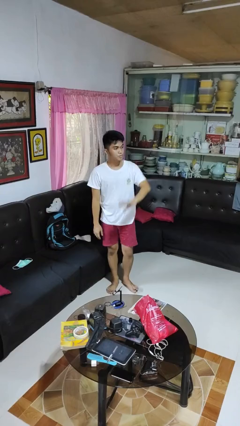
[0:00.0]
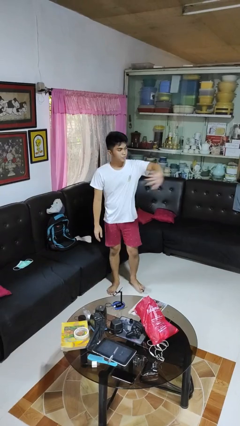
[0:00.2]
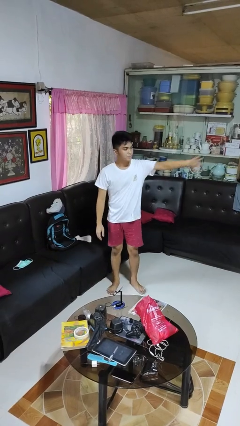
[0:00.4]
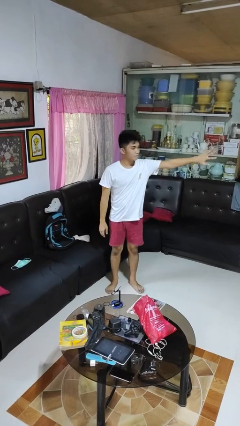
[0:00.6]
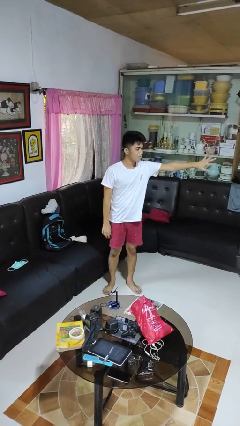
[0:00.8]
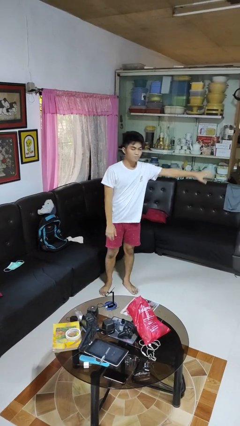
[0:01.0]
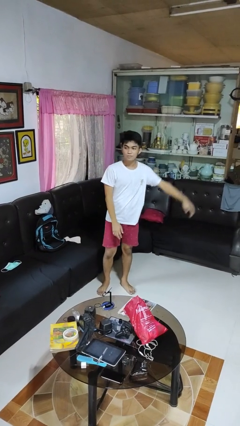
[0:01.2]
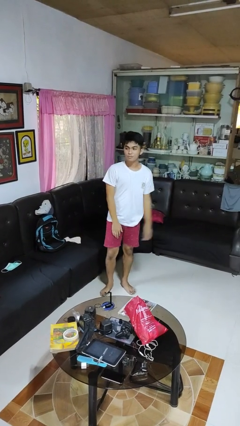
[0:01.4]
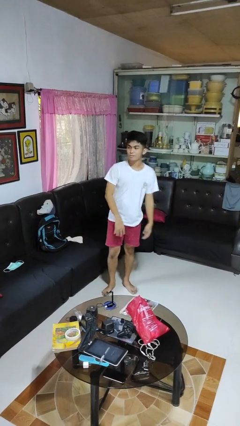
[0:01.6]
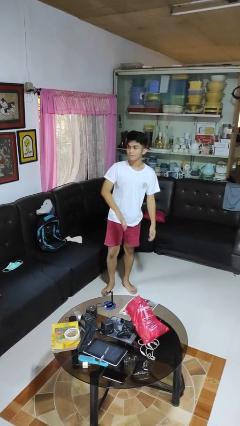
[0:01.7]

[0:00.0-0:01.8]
person gestures swipe left

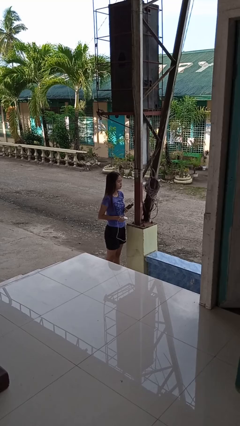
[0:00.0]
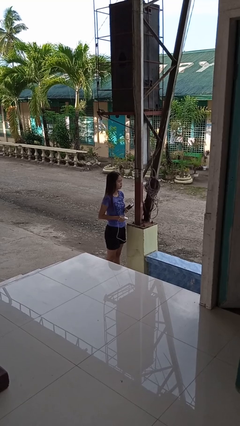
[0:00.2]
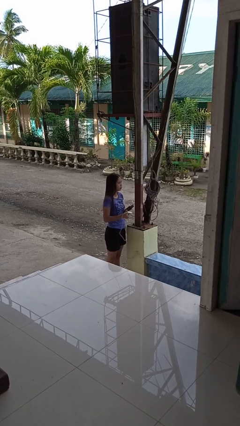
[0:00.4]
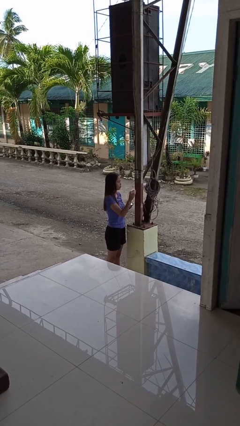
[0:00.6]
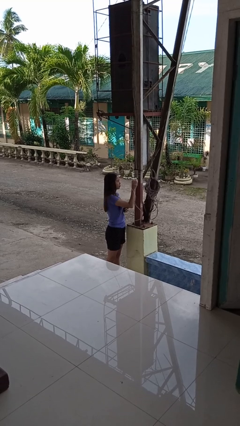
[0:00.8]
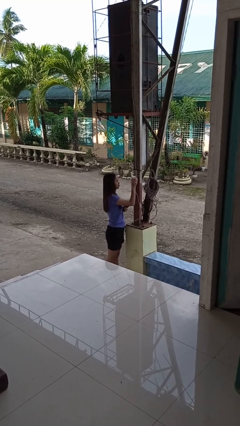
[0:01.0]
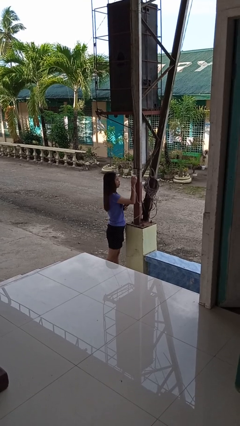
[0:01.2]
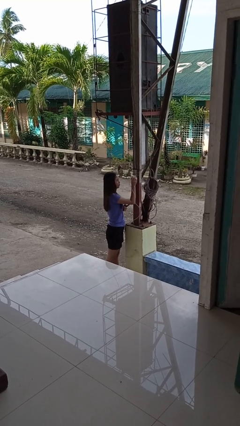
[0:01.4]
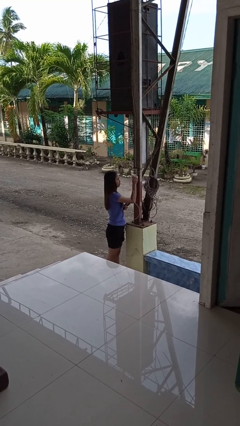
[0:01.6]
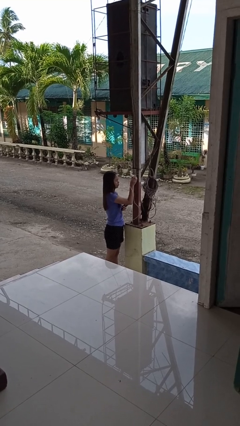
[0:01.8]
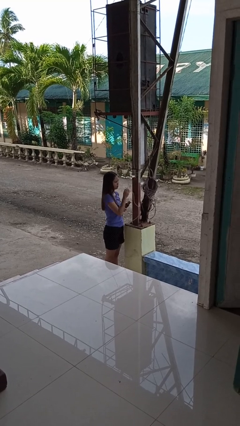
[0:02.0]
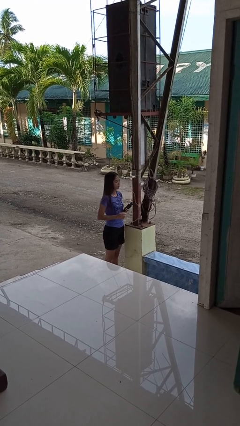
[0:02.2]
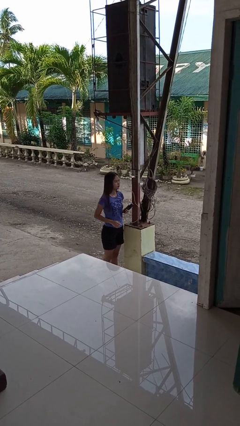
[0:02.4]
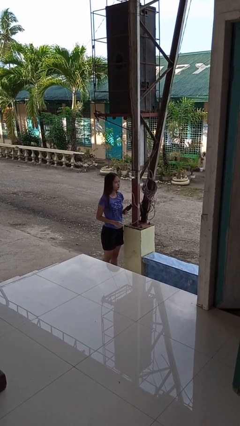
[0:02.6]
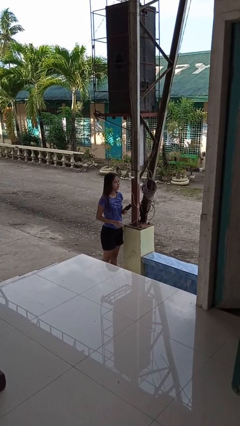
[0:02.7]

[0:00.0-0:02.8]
person plugs into electrical socket

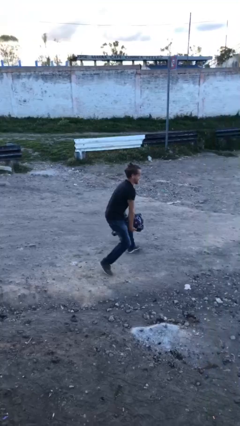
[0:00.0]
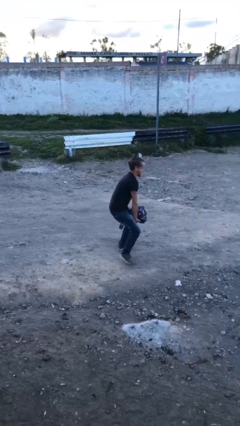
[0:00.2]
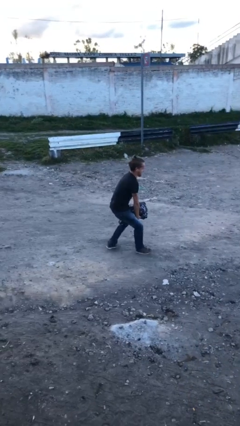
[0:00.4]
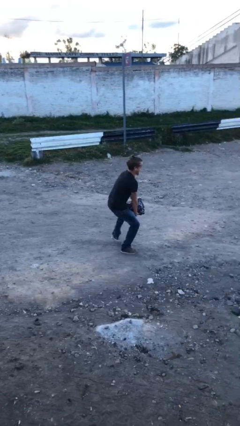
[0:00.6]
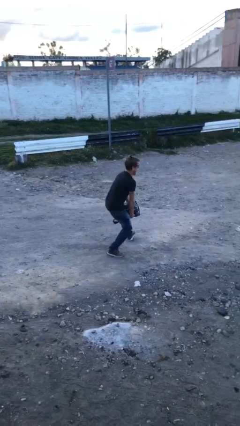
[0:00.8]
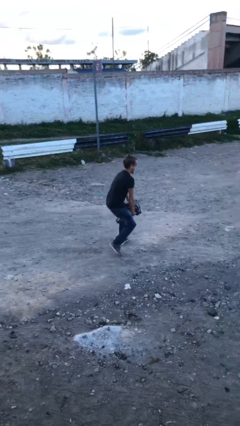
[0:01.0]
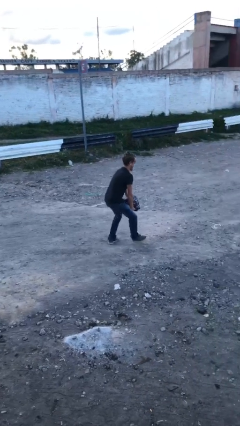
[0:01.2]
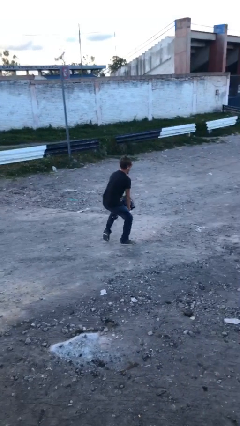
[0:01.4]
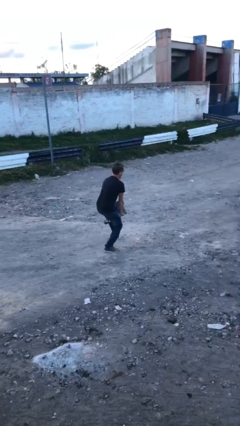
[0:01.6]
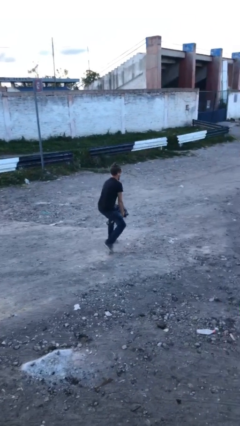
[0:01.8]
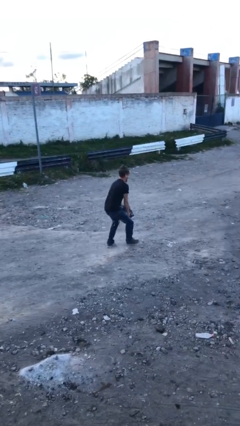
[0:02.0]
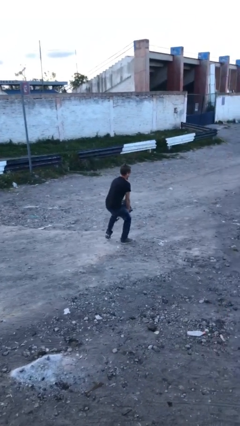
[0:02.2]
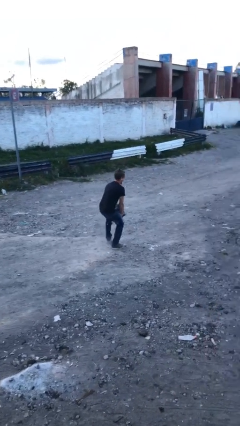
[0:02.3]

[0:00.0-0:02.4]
person carries heavy object

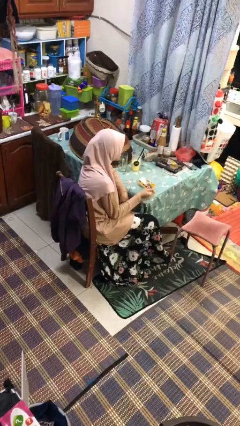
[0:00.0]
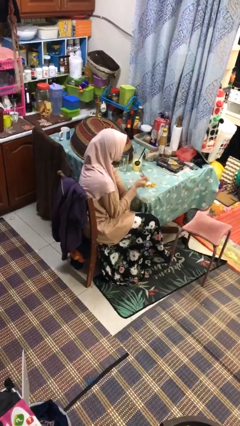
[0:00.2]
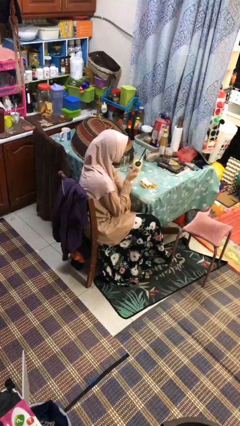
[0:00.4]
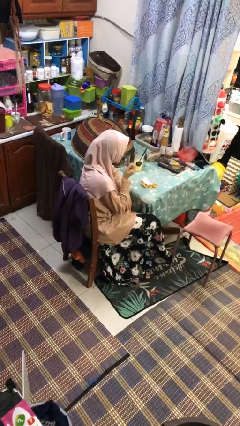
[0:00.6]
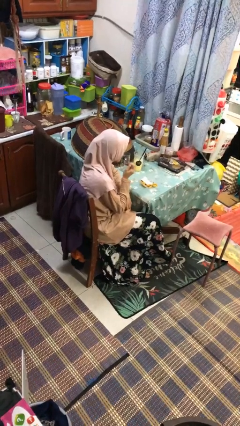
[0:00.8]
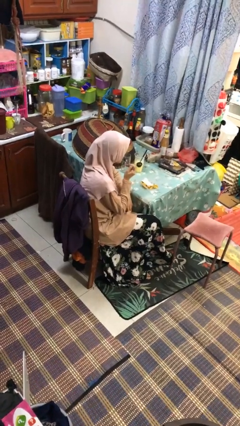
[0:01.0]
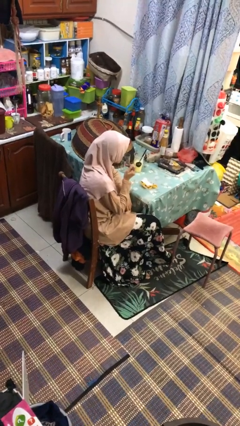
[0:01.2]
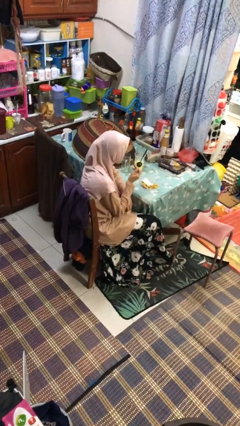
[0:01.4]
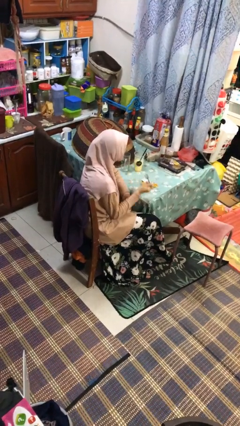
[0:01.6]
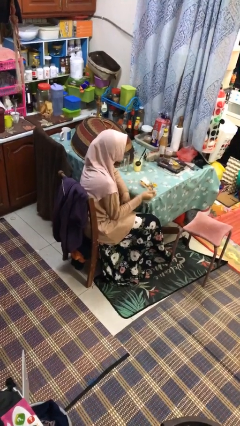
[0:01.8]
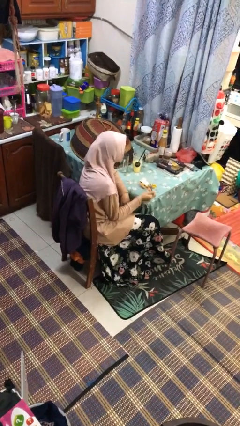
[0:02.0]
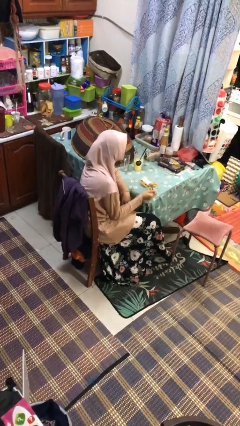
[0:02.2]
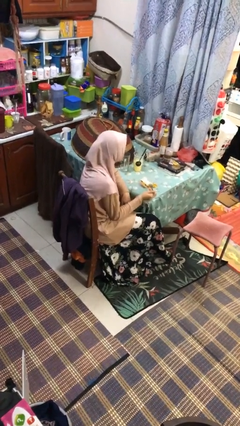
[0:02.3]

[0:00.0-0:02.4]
person eats with utensil

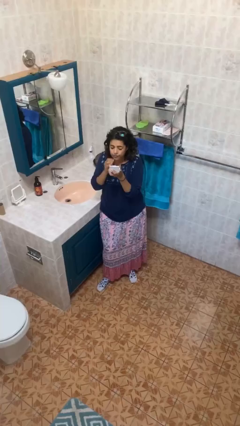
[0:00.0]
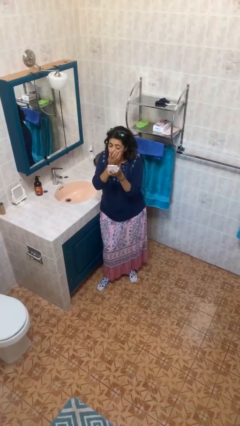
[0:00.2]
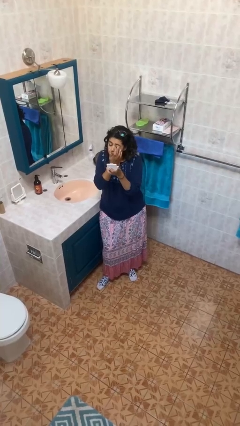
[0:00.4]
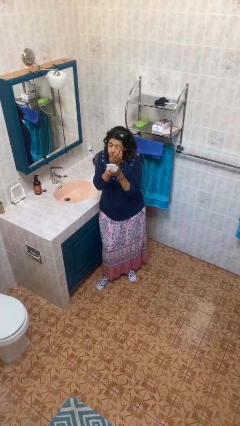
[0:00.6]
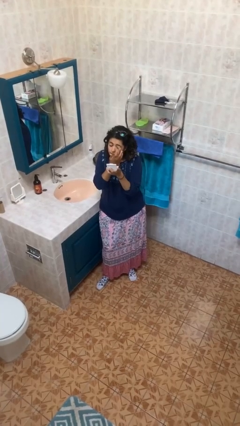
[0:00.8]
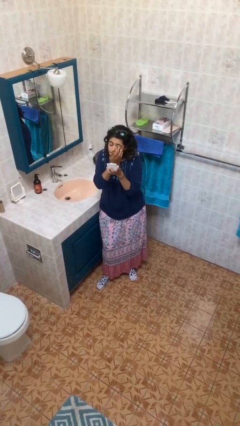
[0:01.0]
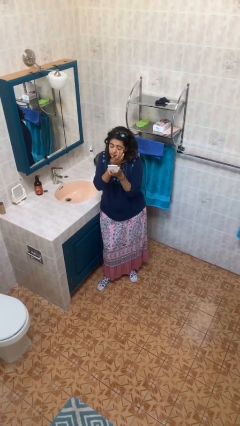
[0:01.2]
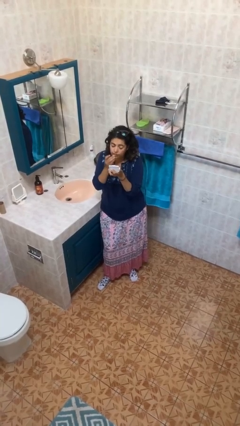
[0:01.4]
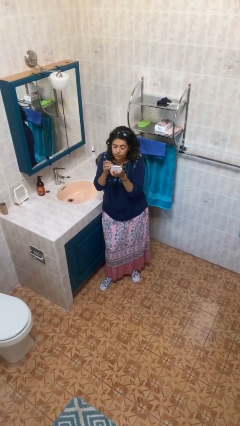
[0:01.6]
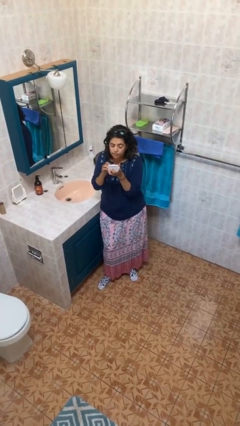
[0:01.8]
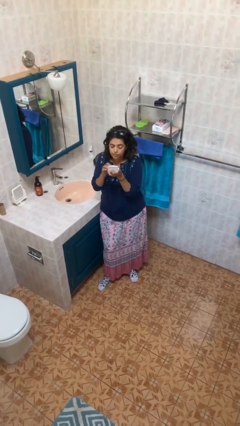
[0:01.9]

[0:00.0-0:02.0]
person applies eye makeup

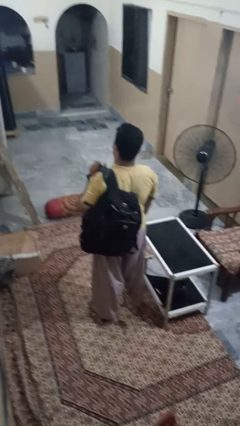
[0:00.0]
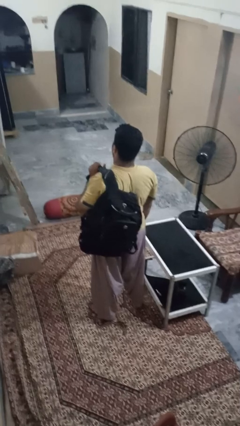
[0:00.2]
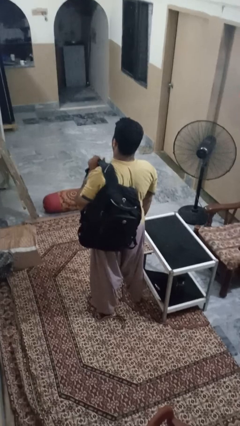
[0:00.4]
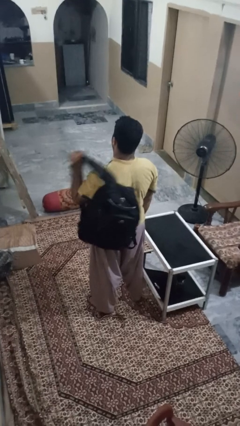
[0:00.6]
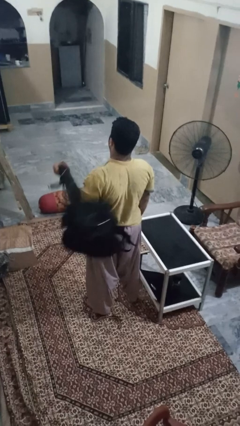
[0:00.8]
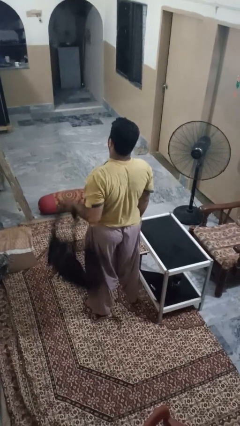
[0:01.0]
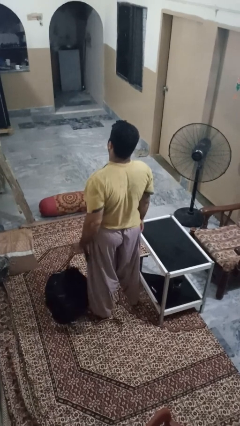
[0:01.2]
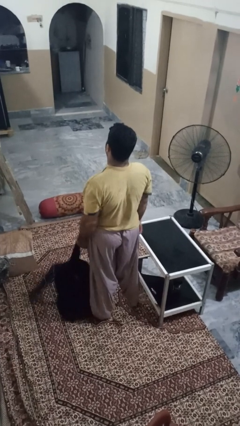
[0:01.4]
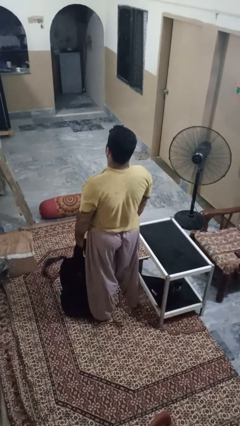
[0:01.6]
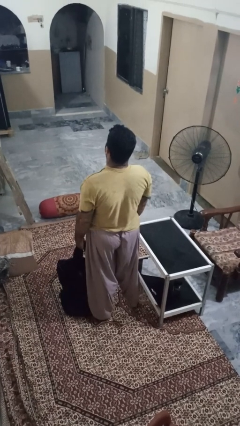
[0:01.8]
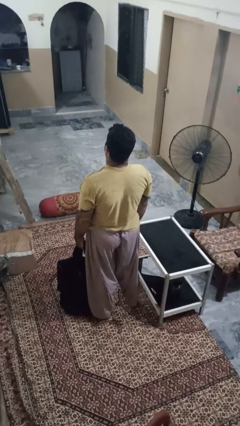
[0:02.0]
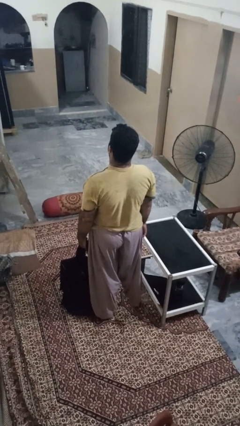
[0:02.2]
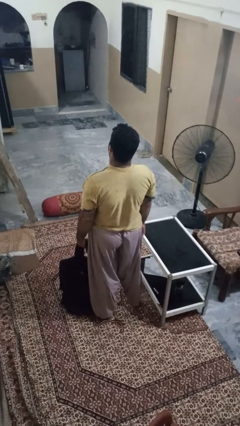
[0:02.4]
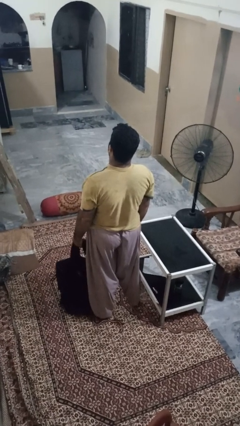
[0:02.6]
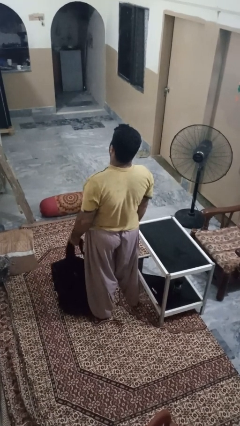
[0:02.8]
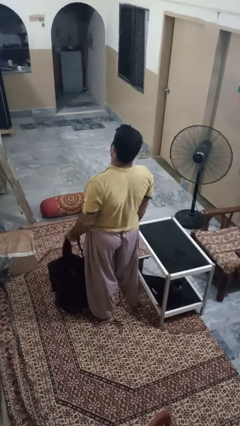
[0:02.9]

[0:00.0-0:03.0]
person takes off backpack

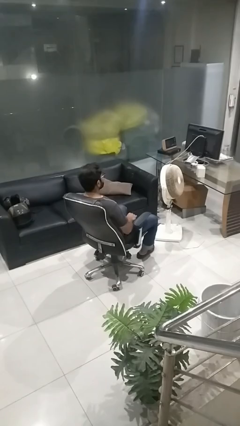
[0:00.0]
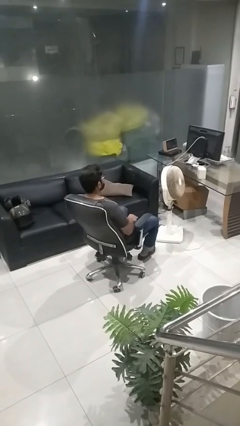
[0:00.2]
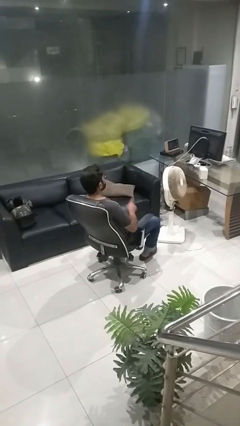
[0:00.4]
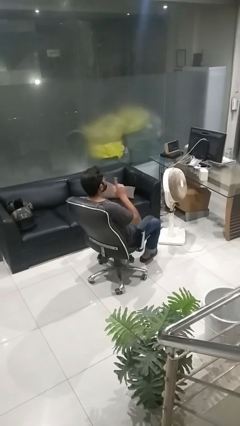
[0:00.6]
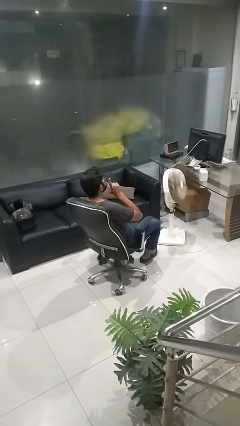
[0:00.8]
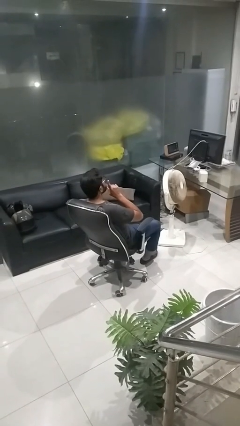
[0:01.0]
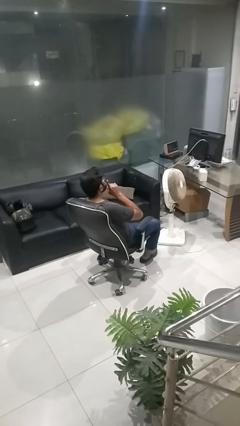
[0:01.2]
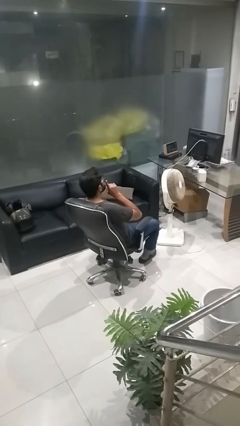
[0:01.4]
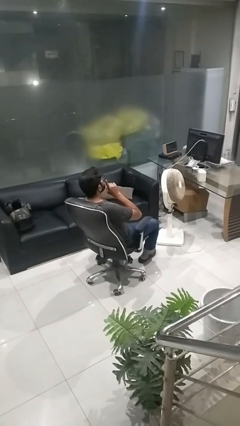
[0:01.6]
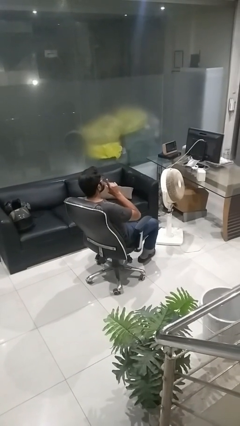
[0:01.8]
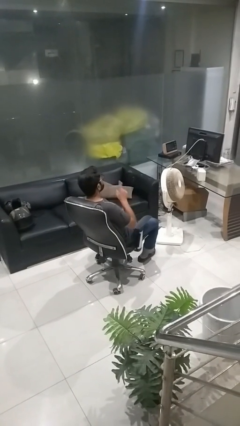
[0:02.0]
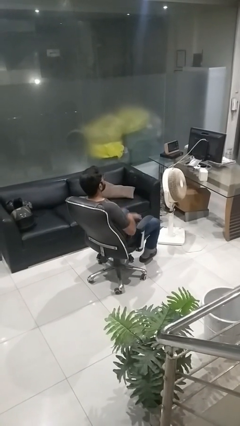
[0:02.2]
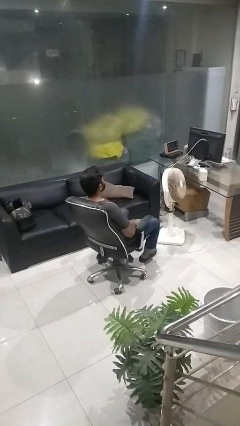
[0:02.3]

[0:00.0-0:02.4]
person gestures be quiet
